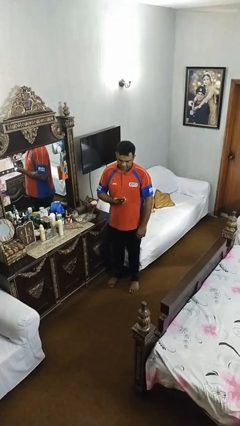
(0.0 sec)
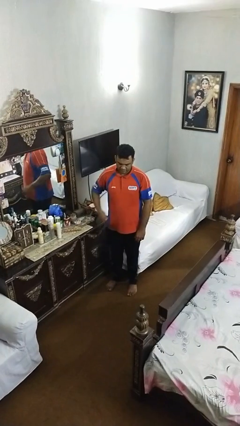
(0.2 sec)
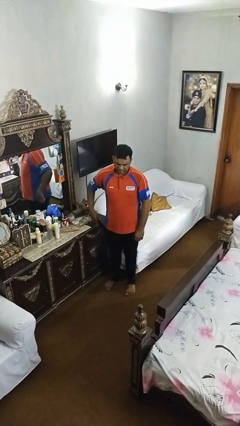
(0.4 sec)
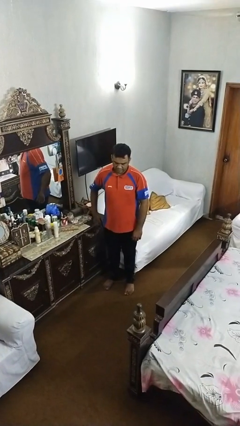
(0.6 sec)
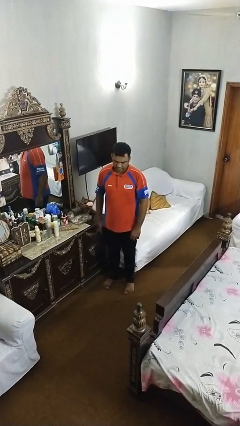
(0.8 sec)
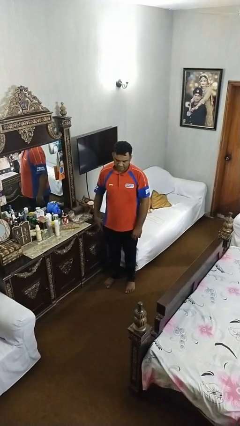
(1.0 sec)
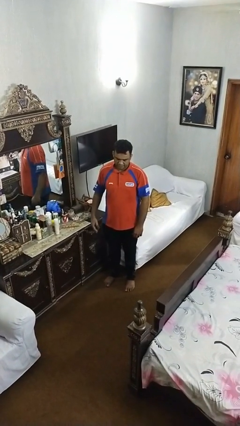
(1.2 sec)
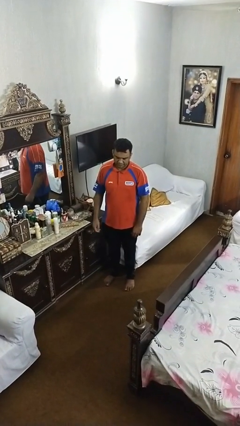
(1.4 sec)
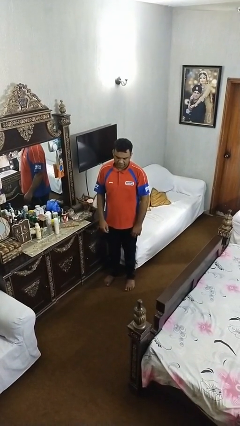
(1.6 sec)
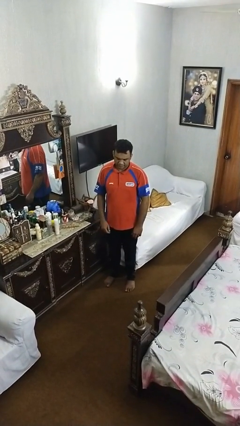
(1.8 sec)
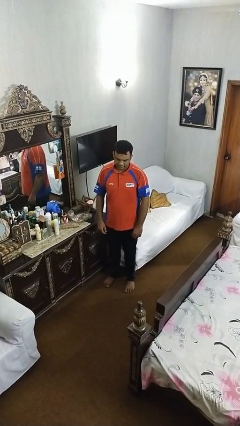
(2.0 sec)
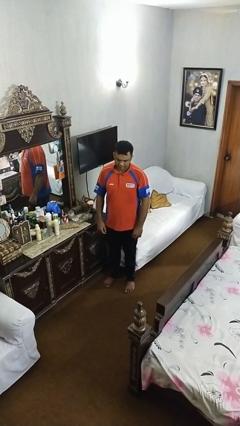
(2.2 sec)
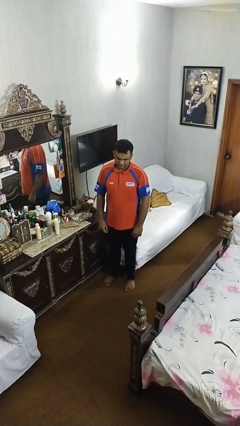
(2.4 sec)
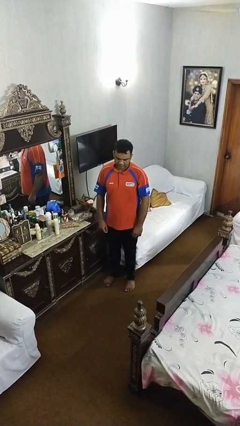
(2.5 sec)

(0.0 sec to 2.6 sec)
person puts phone into pocket

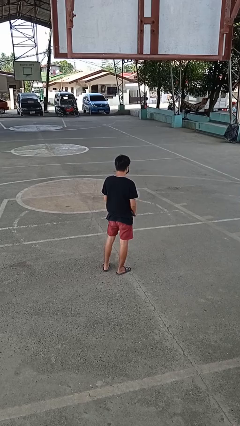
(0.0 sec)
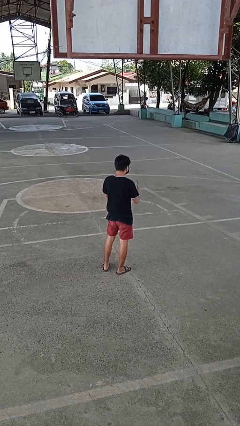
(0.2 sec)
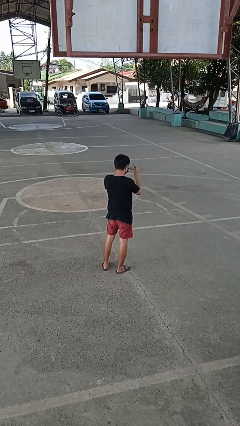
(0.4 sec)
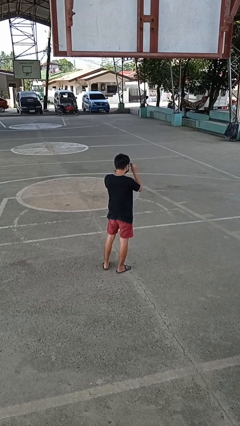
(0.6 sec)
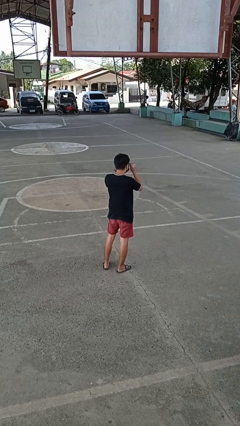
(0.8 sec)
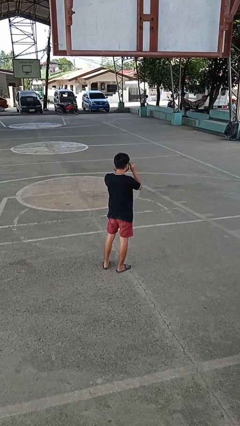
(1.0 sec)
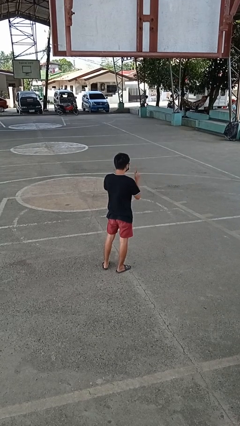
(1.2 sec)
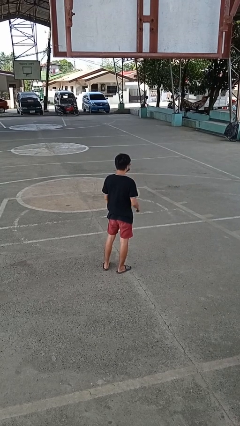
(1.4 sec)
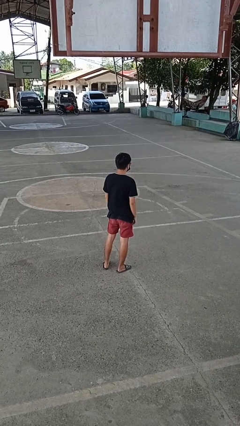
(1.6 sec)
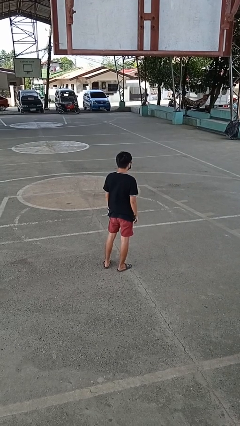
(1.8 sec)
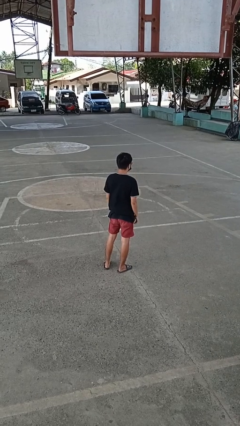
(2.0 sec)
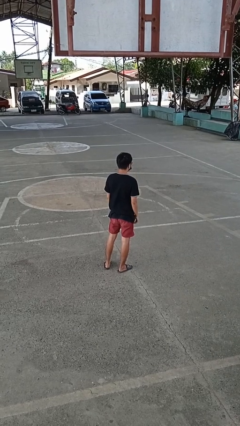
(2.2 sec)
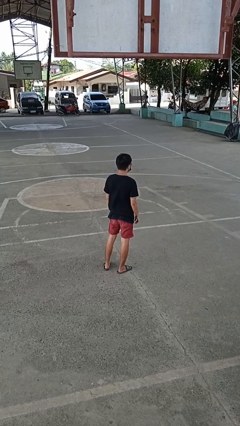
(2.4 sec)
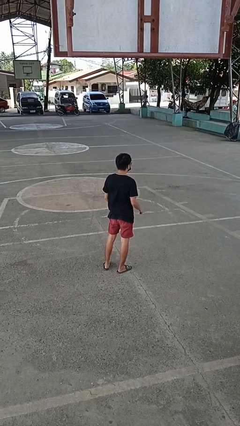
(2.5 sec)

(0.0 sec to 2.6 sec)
person puts on glasses

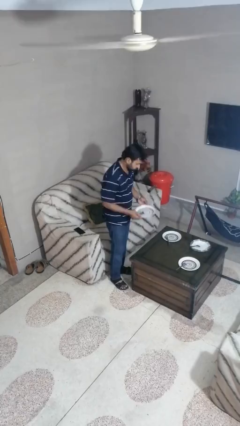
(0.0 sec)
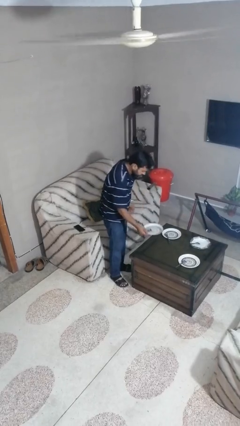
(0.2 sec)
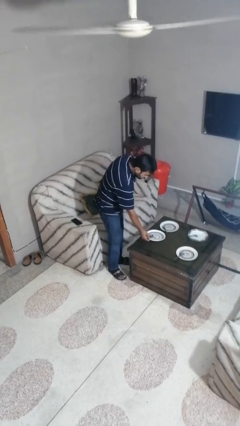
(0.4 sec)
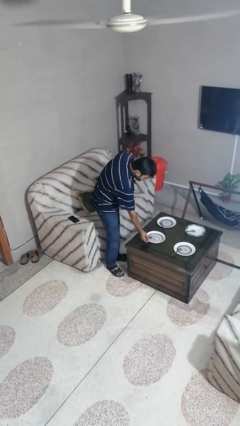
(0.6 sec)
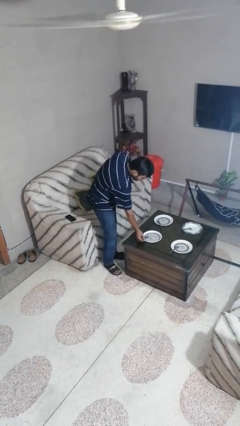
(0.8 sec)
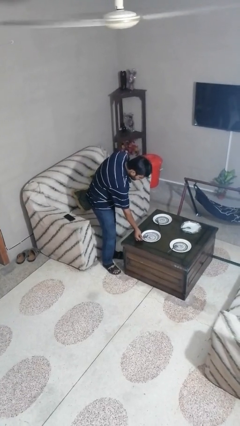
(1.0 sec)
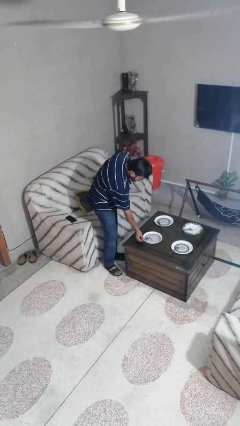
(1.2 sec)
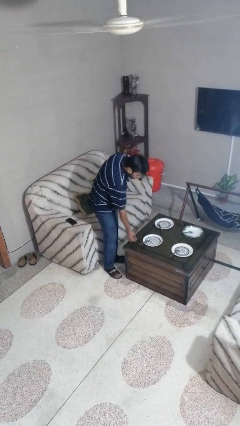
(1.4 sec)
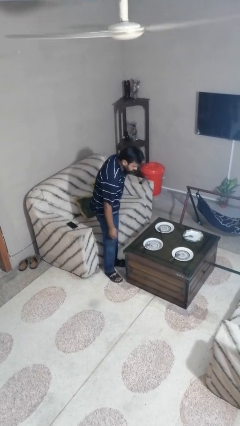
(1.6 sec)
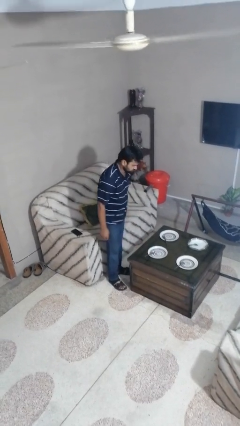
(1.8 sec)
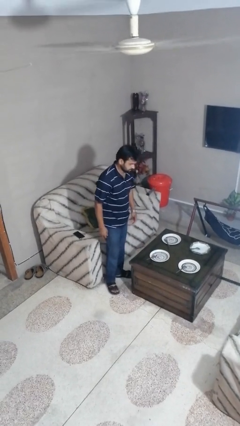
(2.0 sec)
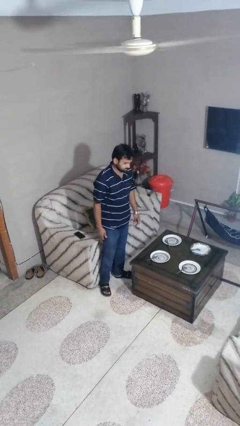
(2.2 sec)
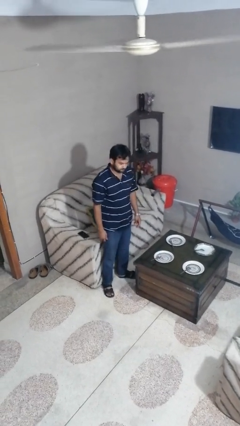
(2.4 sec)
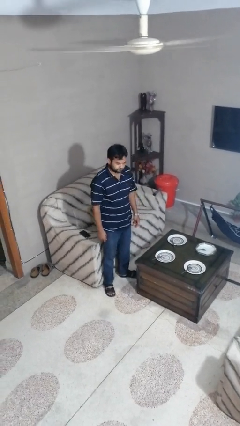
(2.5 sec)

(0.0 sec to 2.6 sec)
person sets table

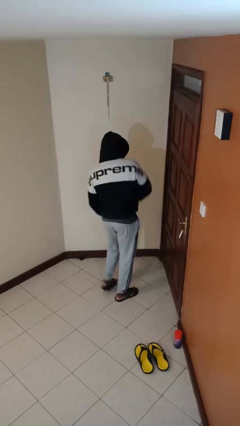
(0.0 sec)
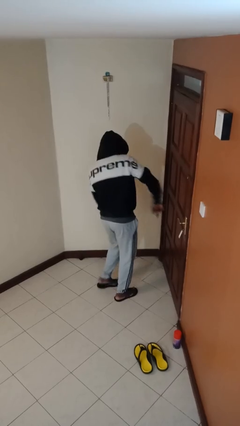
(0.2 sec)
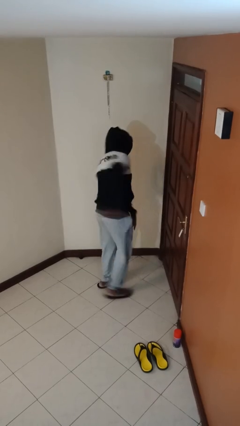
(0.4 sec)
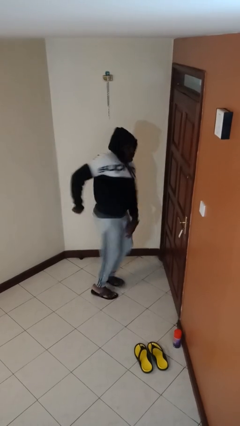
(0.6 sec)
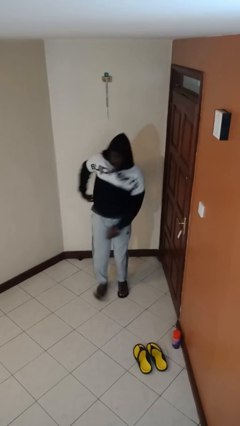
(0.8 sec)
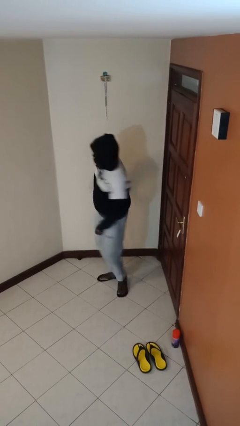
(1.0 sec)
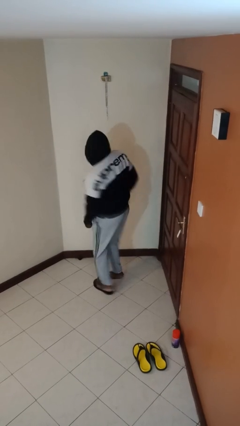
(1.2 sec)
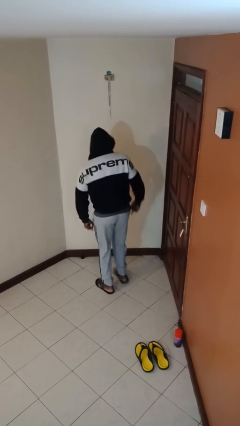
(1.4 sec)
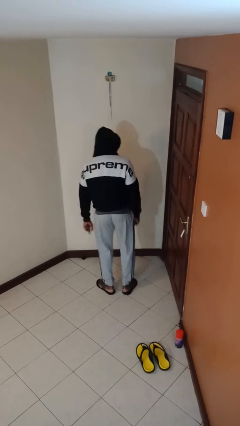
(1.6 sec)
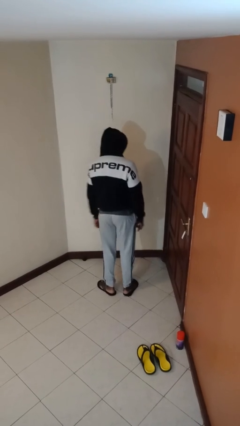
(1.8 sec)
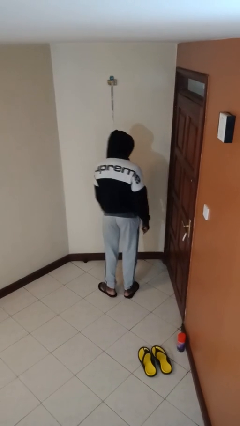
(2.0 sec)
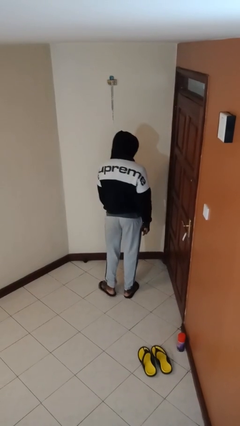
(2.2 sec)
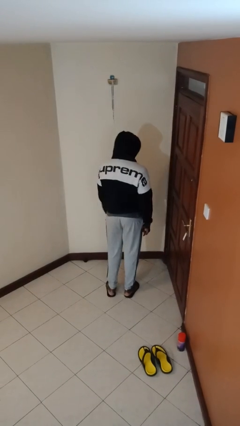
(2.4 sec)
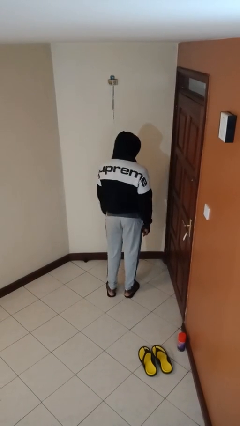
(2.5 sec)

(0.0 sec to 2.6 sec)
person twirls

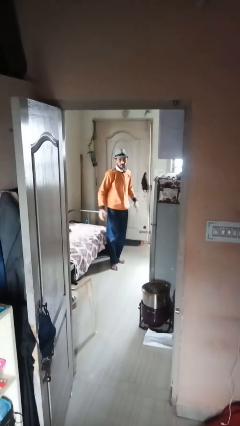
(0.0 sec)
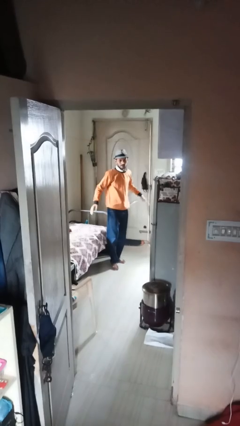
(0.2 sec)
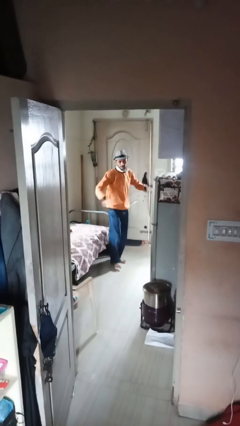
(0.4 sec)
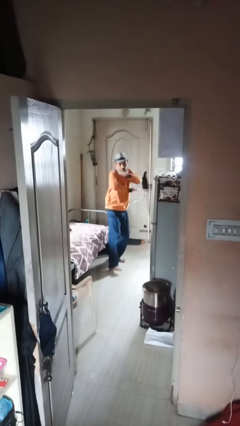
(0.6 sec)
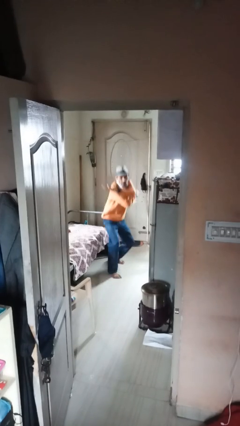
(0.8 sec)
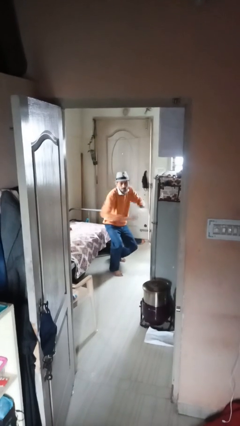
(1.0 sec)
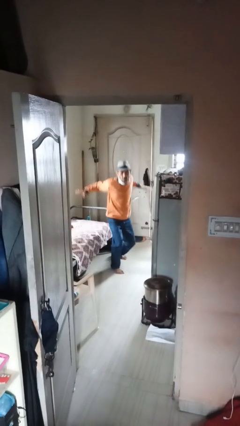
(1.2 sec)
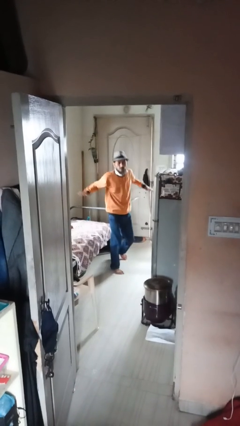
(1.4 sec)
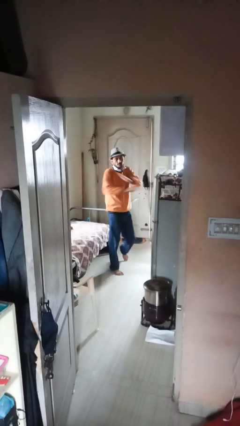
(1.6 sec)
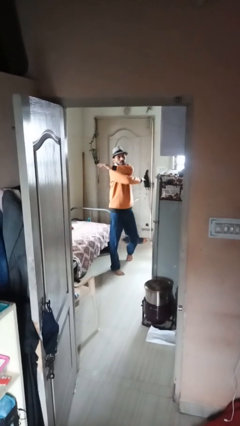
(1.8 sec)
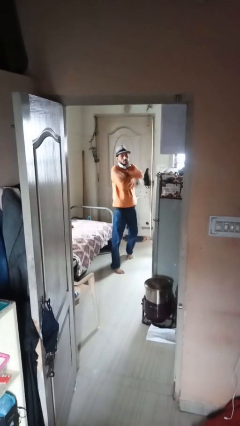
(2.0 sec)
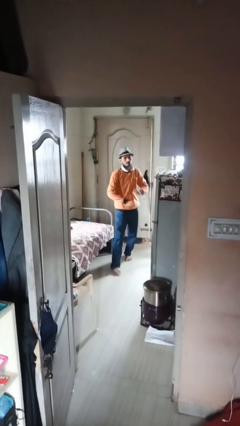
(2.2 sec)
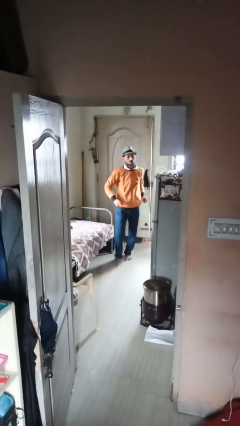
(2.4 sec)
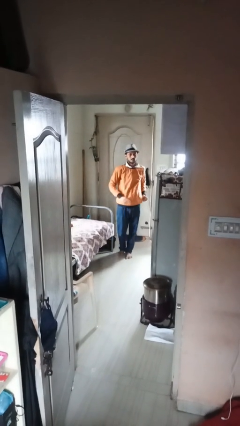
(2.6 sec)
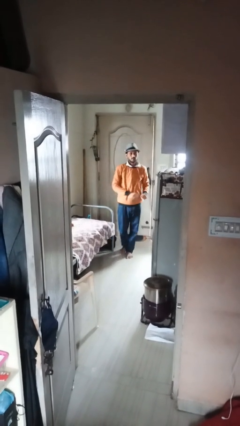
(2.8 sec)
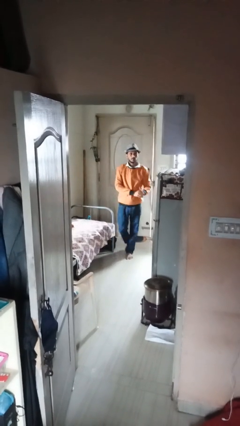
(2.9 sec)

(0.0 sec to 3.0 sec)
person karate chop

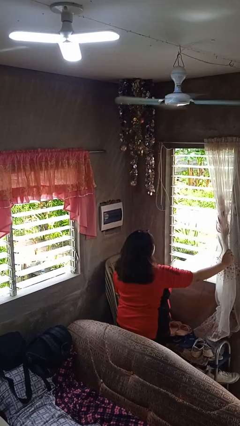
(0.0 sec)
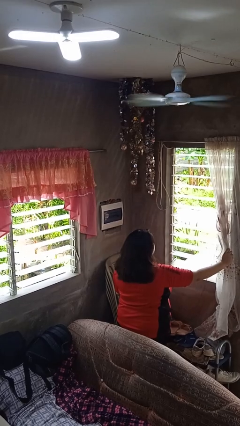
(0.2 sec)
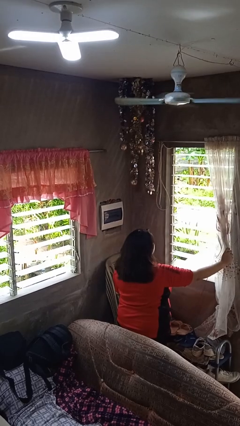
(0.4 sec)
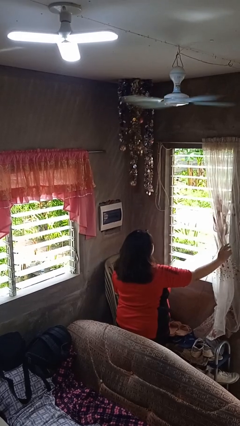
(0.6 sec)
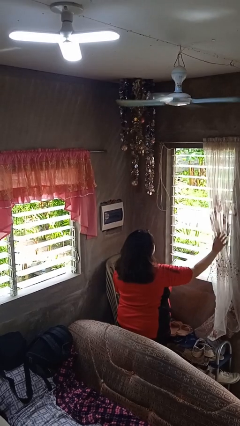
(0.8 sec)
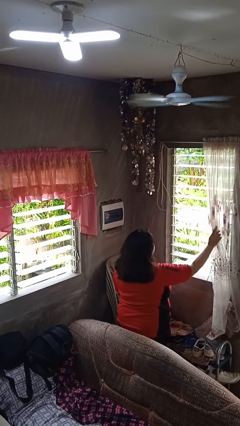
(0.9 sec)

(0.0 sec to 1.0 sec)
person closes curtains

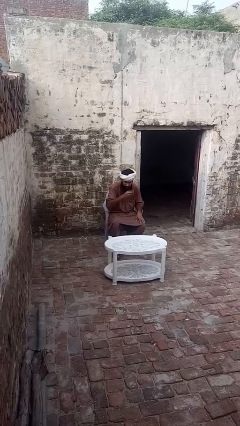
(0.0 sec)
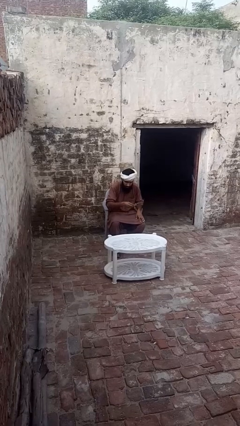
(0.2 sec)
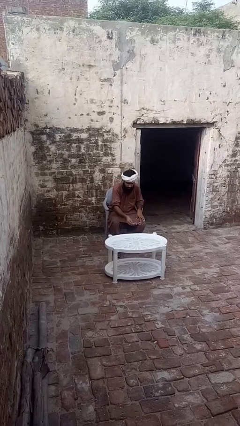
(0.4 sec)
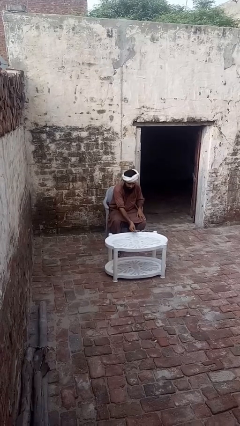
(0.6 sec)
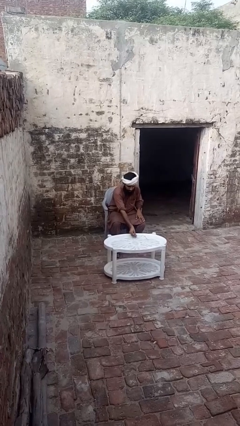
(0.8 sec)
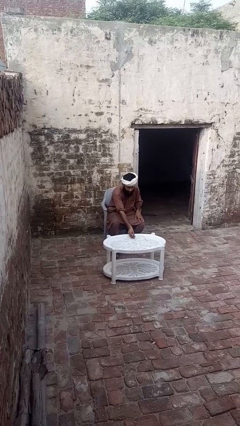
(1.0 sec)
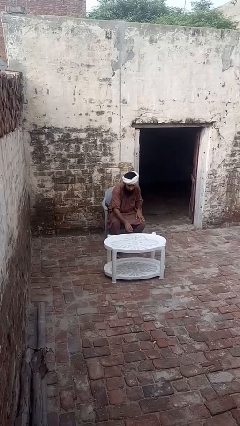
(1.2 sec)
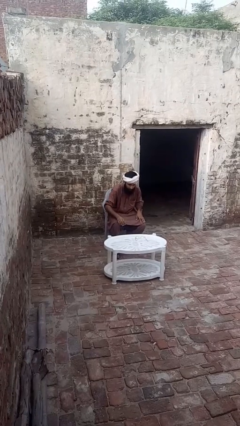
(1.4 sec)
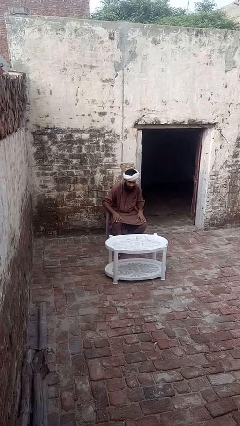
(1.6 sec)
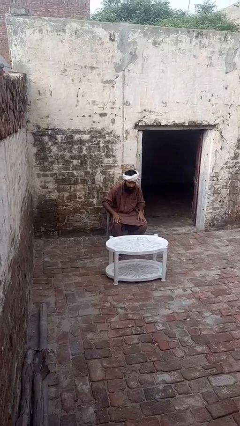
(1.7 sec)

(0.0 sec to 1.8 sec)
person takes off glasses

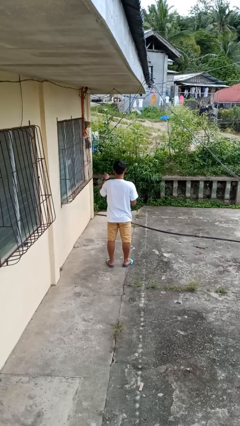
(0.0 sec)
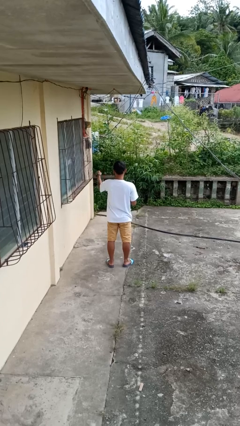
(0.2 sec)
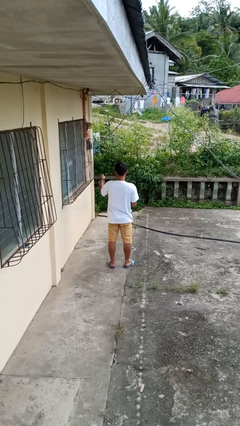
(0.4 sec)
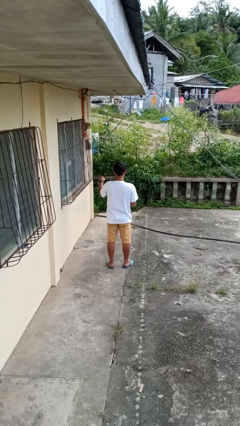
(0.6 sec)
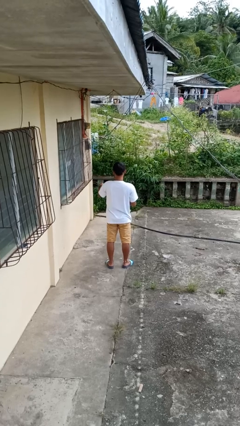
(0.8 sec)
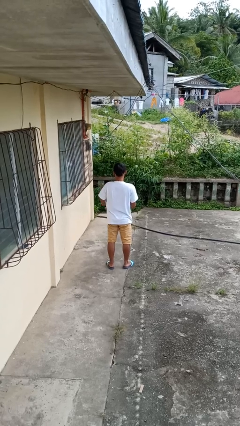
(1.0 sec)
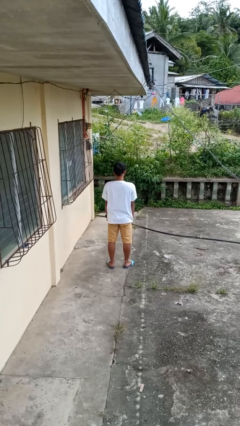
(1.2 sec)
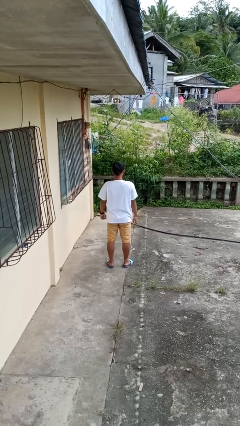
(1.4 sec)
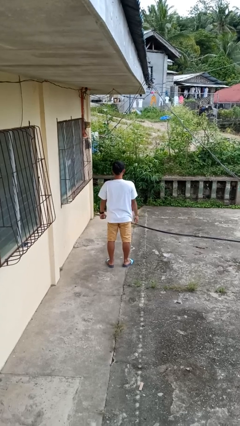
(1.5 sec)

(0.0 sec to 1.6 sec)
person punches
